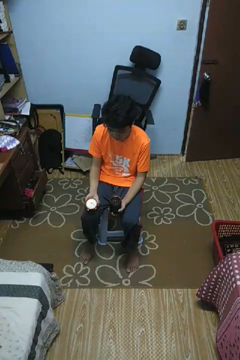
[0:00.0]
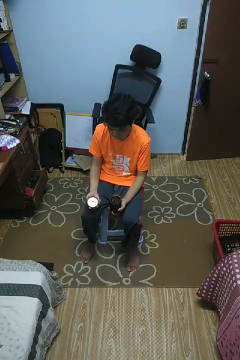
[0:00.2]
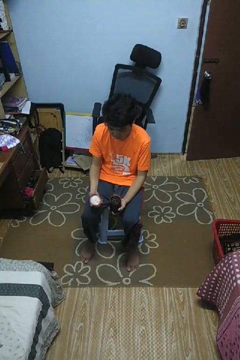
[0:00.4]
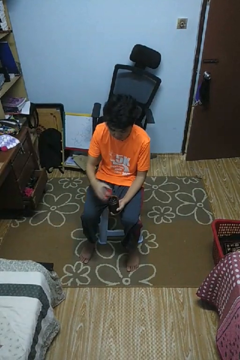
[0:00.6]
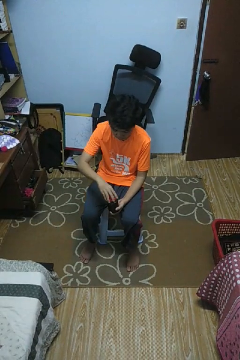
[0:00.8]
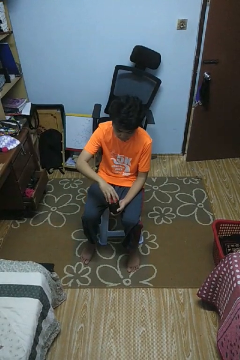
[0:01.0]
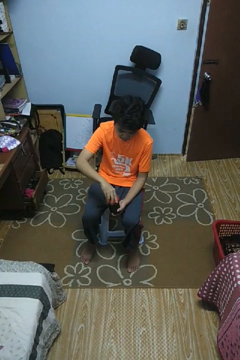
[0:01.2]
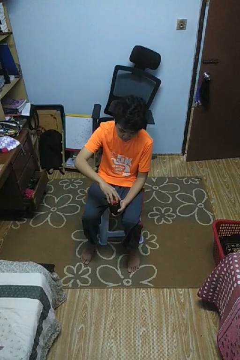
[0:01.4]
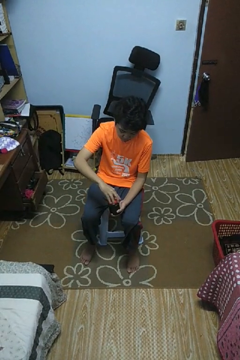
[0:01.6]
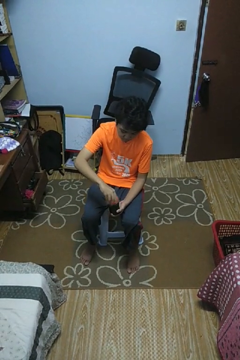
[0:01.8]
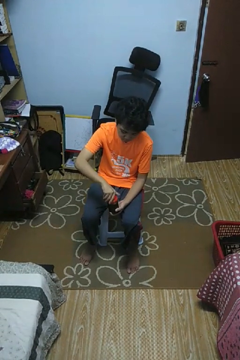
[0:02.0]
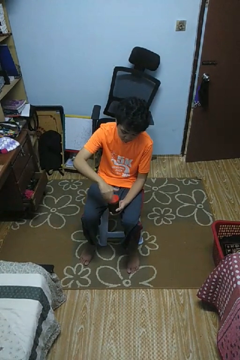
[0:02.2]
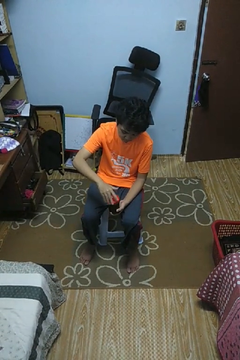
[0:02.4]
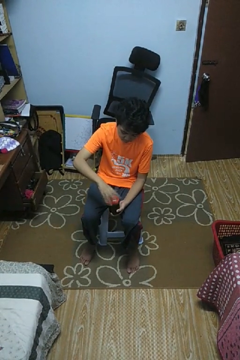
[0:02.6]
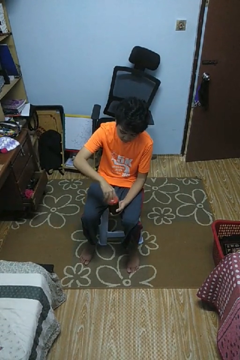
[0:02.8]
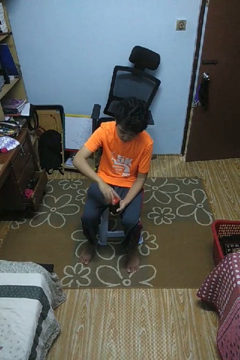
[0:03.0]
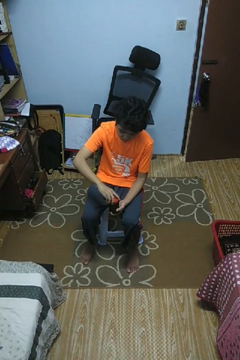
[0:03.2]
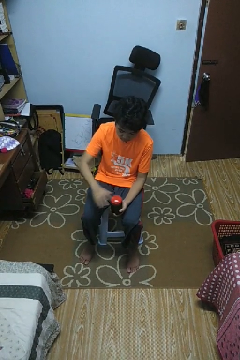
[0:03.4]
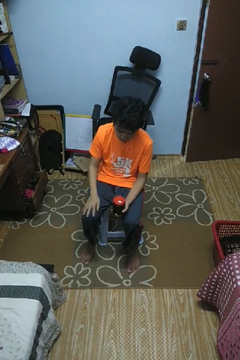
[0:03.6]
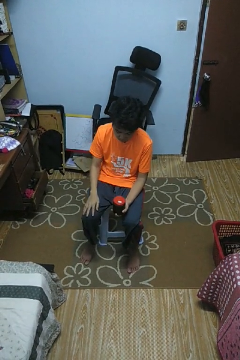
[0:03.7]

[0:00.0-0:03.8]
person closes jar

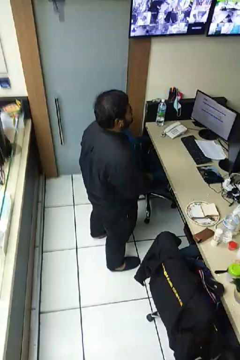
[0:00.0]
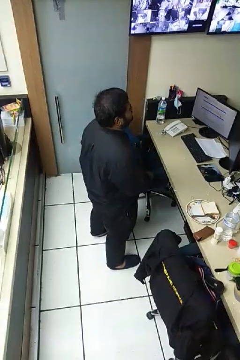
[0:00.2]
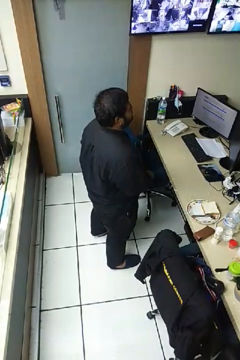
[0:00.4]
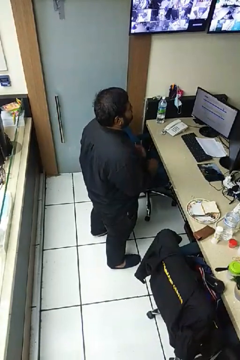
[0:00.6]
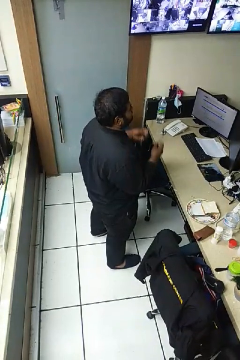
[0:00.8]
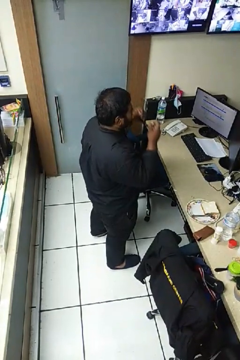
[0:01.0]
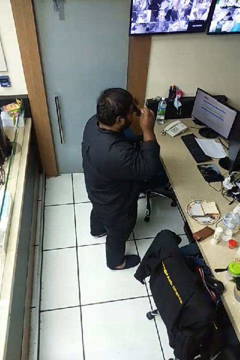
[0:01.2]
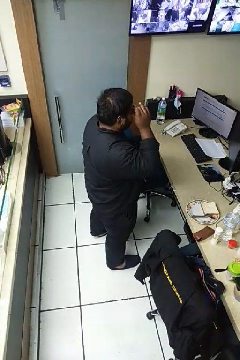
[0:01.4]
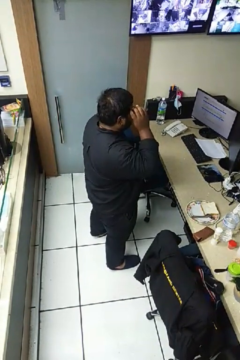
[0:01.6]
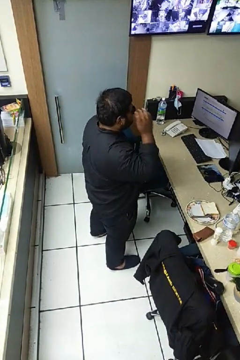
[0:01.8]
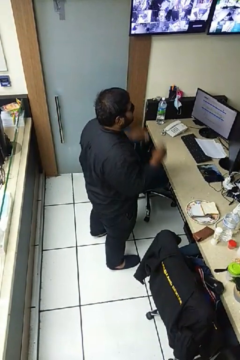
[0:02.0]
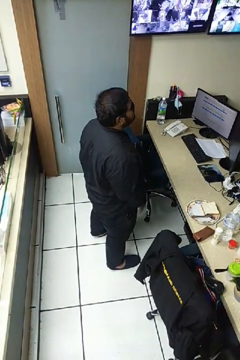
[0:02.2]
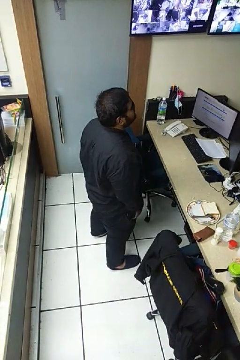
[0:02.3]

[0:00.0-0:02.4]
person puts on sunglasses

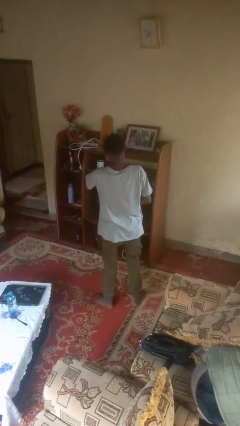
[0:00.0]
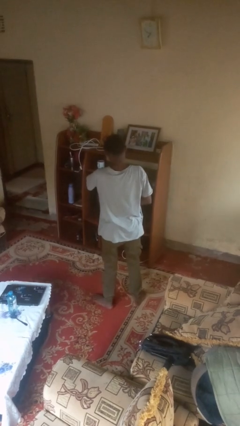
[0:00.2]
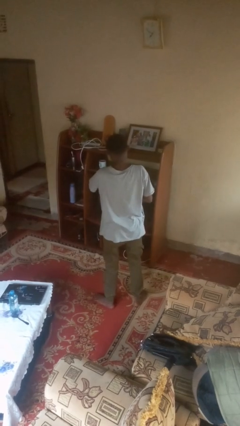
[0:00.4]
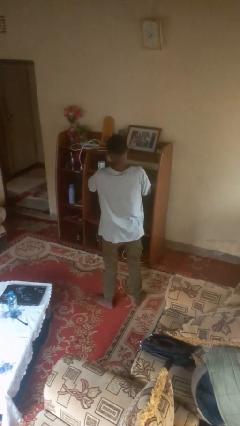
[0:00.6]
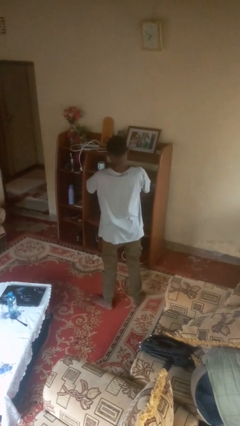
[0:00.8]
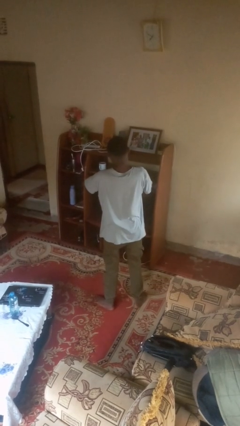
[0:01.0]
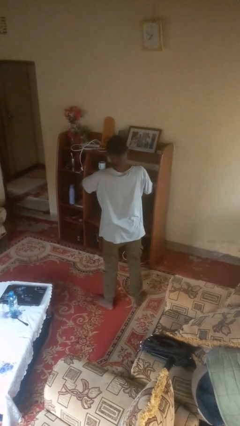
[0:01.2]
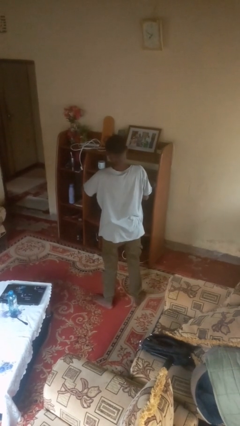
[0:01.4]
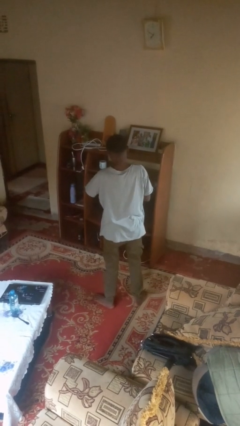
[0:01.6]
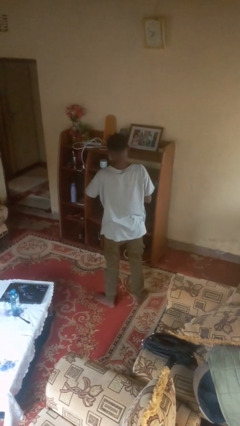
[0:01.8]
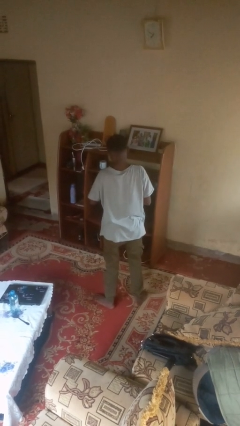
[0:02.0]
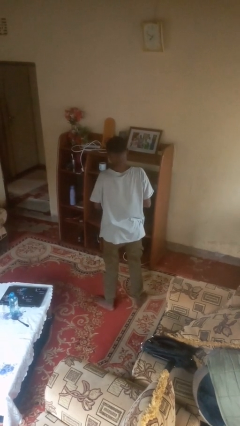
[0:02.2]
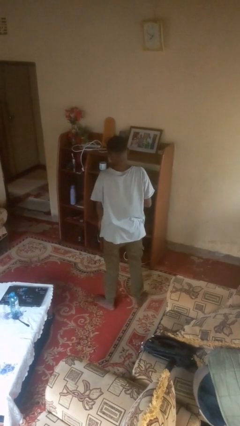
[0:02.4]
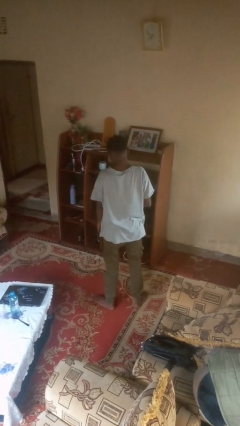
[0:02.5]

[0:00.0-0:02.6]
person takes off wristwatch

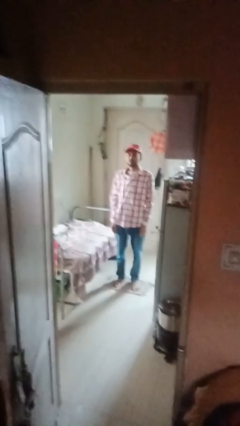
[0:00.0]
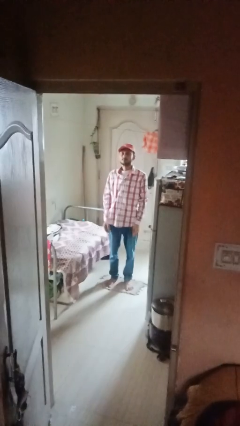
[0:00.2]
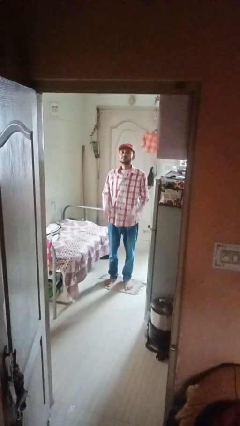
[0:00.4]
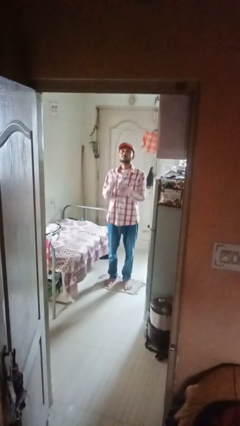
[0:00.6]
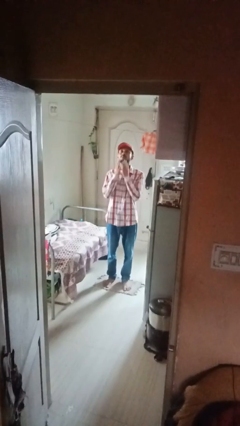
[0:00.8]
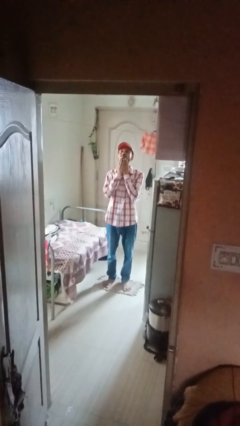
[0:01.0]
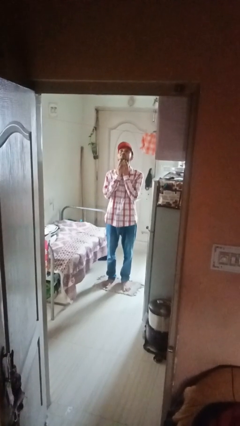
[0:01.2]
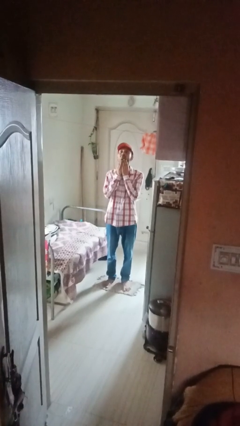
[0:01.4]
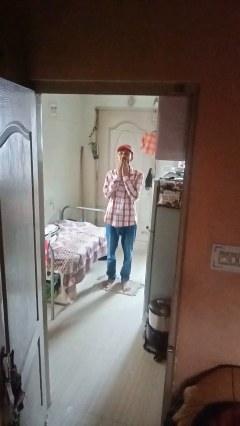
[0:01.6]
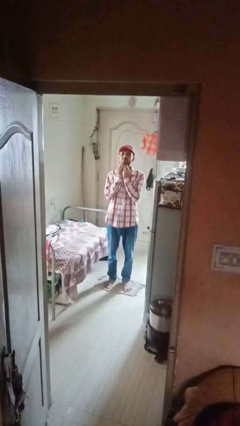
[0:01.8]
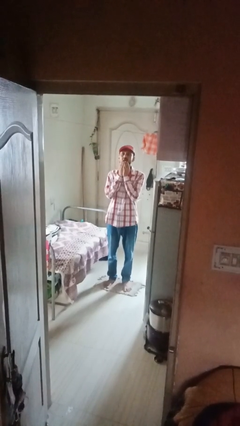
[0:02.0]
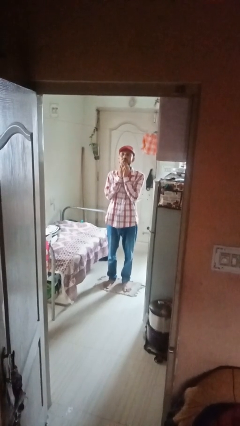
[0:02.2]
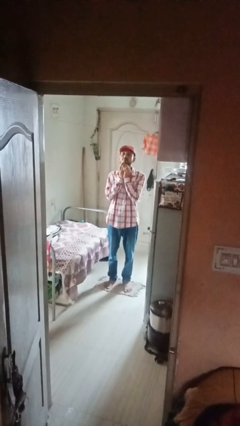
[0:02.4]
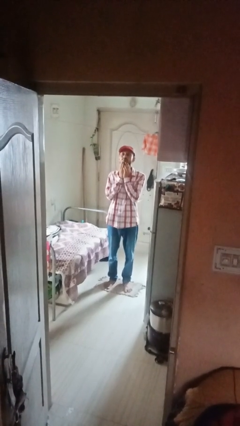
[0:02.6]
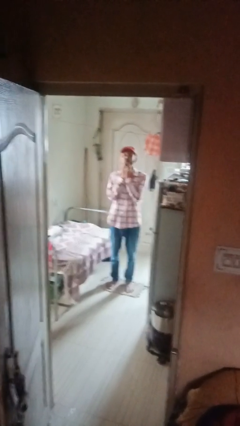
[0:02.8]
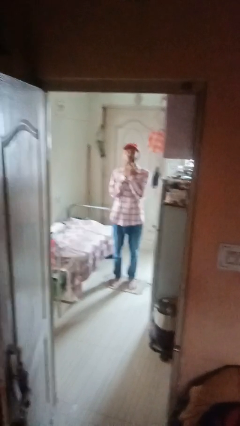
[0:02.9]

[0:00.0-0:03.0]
person strokes chin

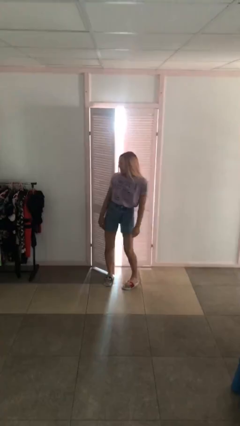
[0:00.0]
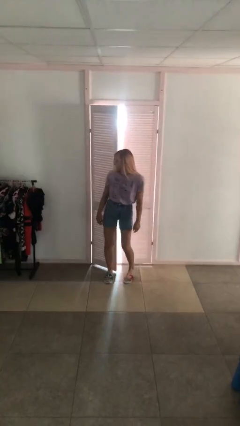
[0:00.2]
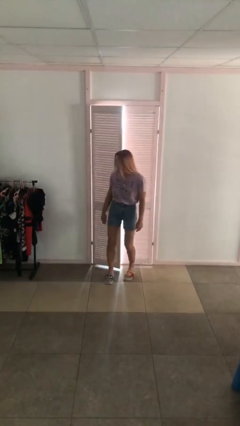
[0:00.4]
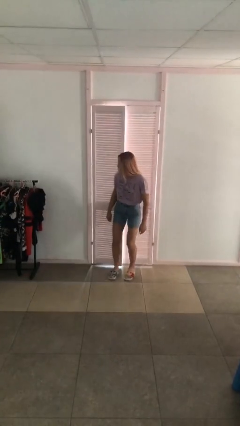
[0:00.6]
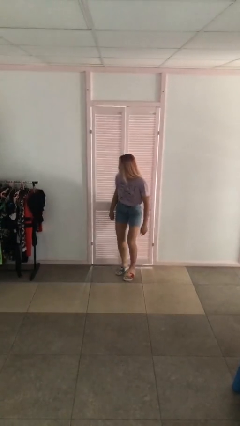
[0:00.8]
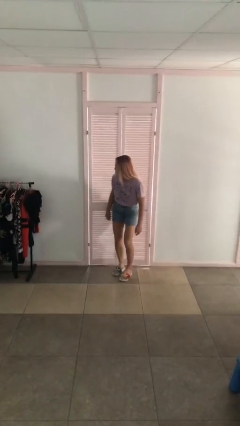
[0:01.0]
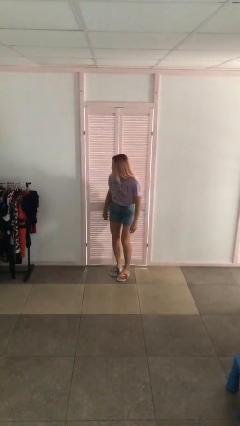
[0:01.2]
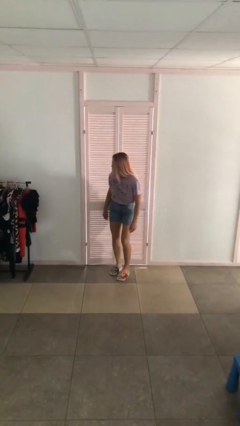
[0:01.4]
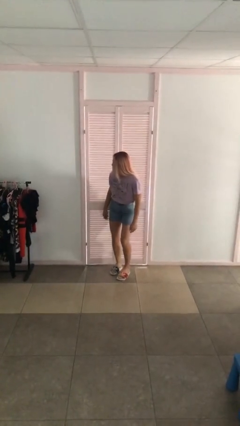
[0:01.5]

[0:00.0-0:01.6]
person closes door with hip

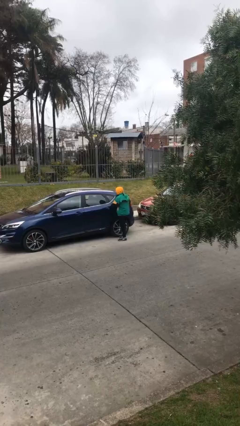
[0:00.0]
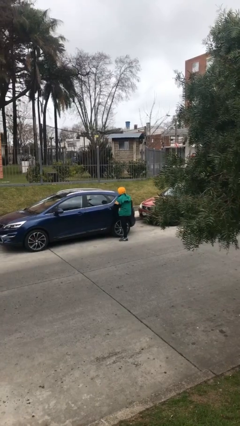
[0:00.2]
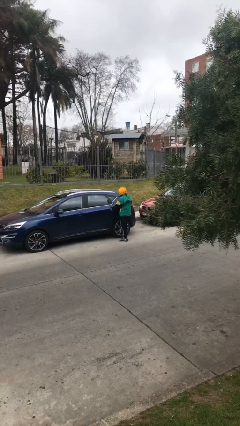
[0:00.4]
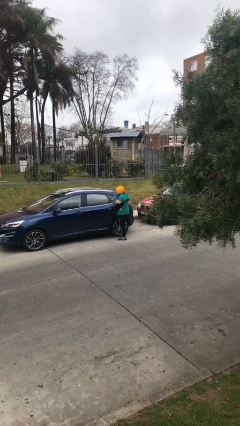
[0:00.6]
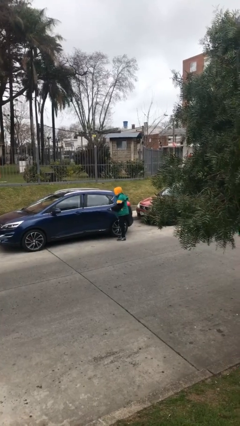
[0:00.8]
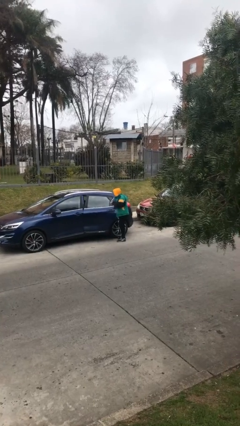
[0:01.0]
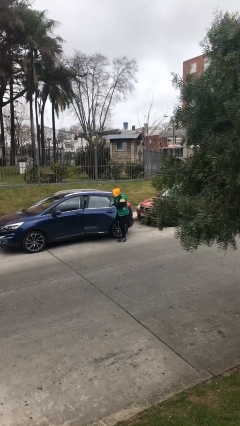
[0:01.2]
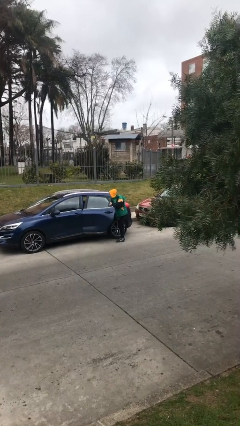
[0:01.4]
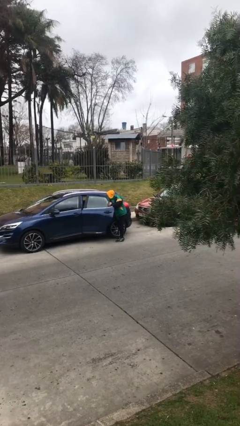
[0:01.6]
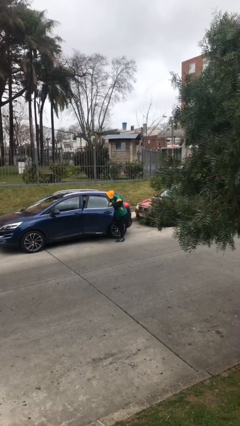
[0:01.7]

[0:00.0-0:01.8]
person opens car door

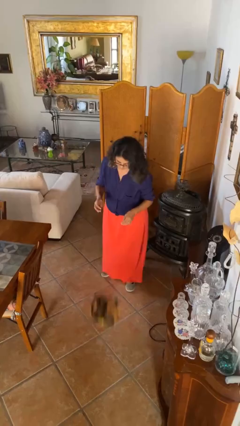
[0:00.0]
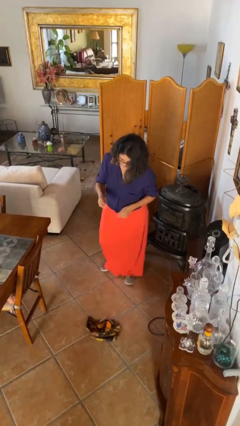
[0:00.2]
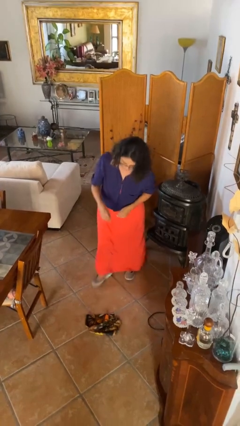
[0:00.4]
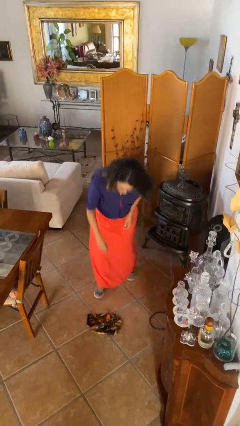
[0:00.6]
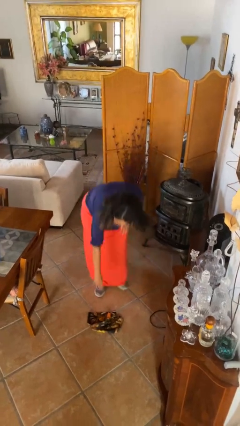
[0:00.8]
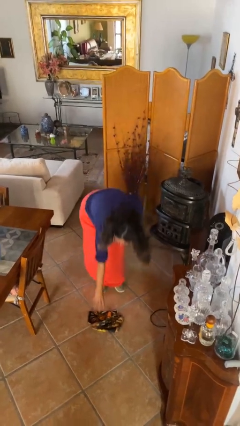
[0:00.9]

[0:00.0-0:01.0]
person drops object

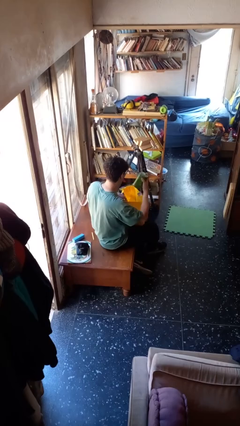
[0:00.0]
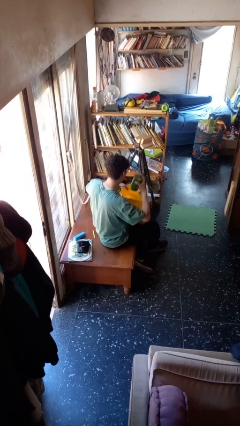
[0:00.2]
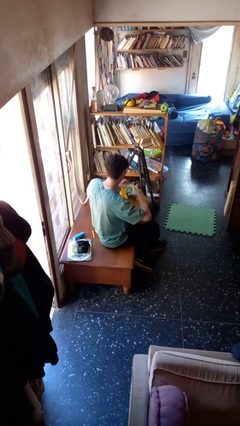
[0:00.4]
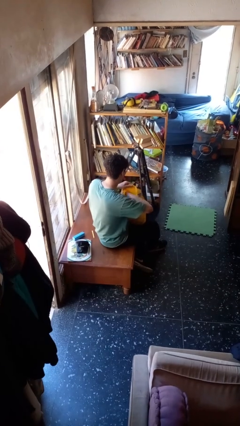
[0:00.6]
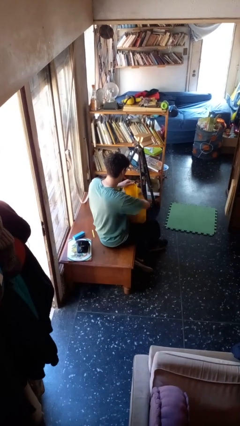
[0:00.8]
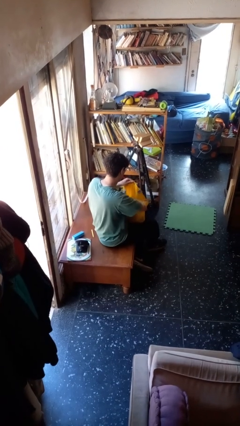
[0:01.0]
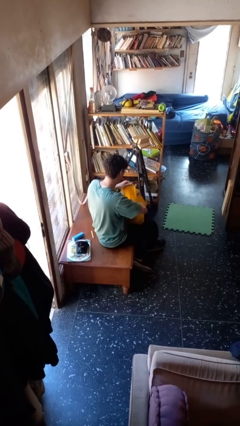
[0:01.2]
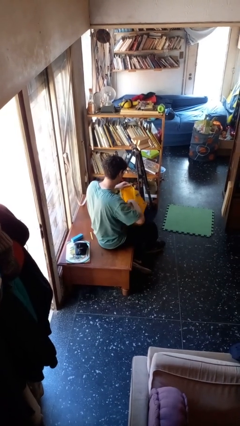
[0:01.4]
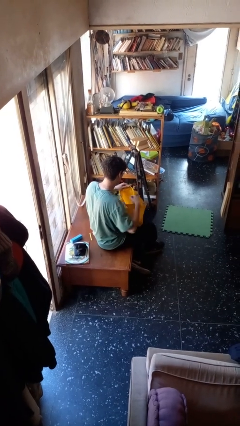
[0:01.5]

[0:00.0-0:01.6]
person puts object into bag

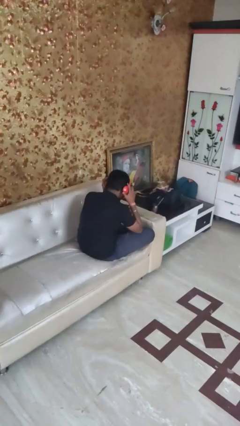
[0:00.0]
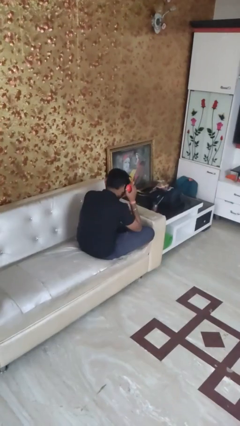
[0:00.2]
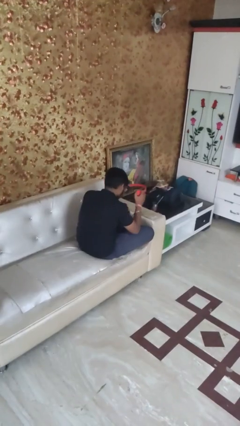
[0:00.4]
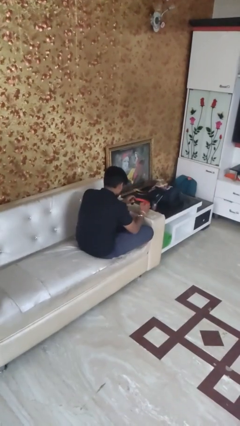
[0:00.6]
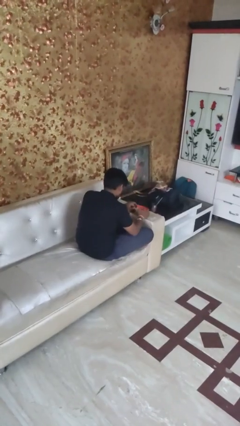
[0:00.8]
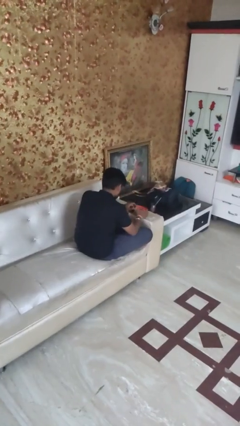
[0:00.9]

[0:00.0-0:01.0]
person takes off headphones
